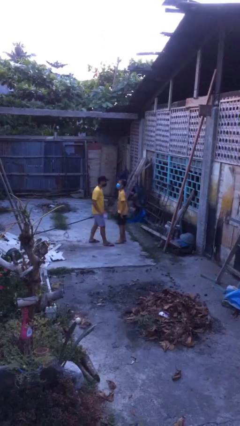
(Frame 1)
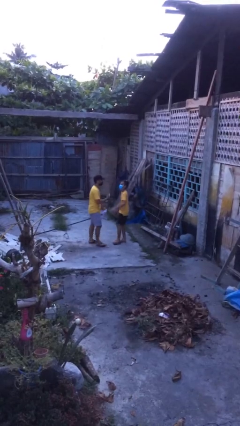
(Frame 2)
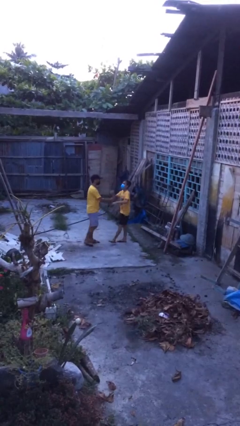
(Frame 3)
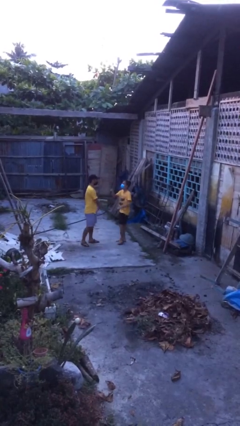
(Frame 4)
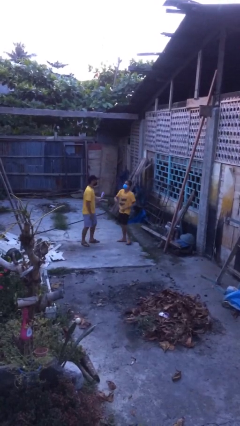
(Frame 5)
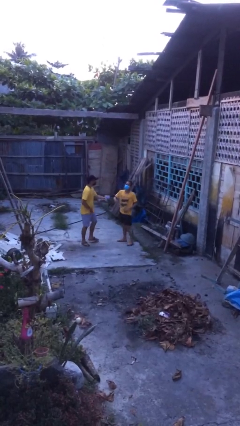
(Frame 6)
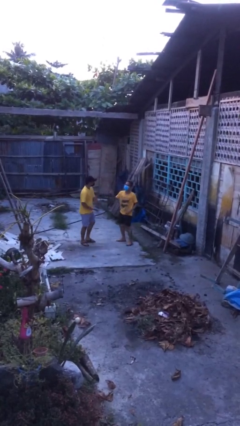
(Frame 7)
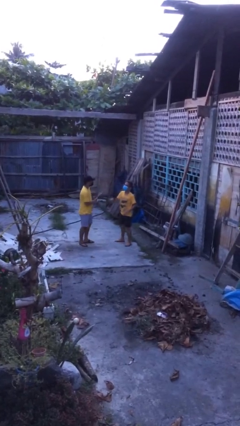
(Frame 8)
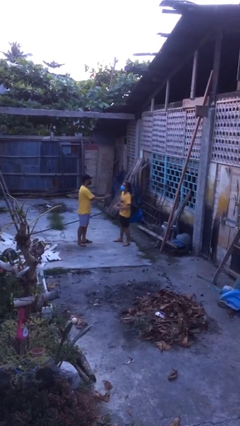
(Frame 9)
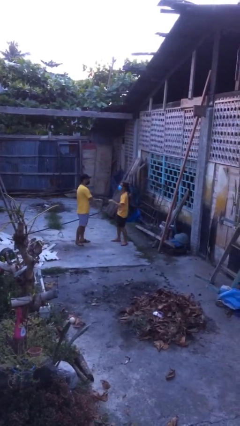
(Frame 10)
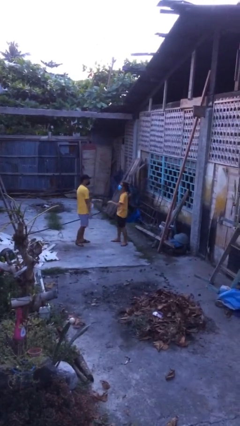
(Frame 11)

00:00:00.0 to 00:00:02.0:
person talks to person

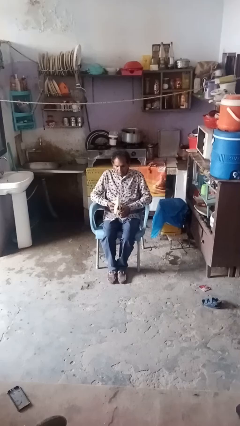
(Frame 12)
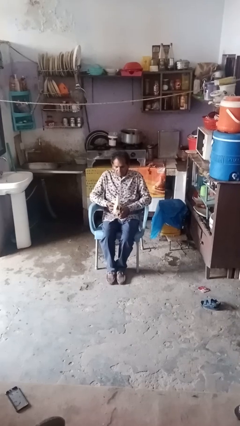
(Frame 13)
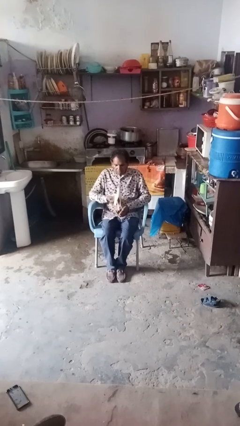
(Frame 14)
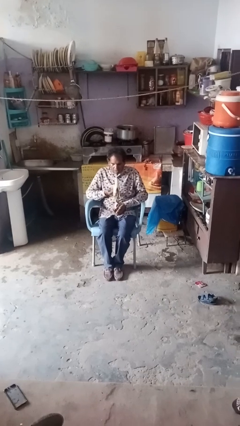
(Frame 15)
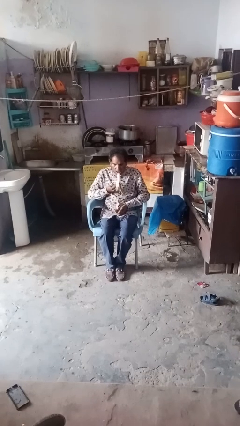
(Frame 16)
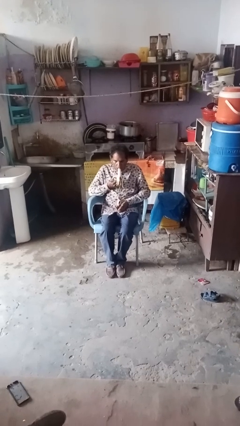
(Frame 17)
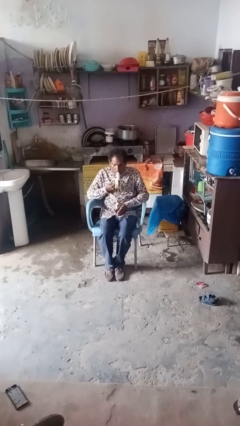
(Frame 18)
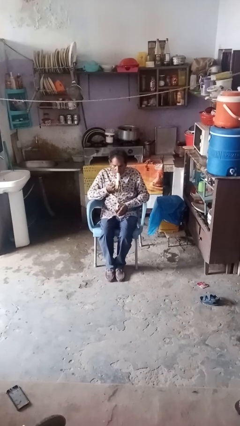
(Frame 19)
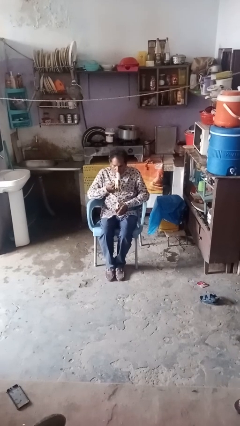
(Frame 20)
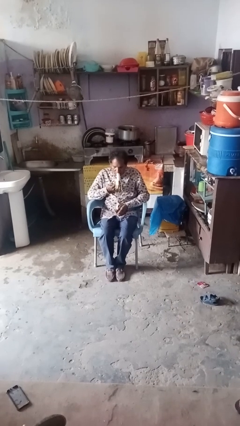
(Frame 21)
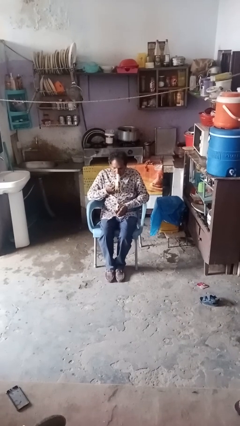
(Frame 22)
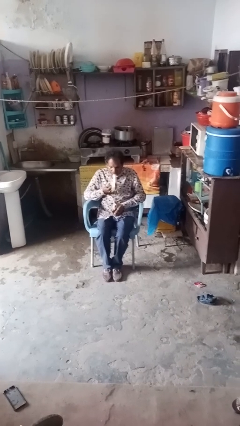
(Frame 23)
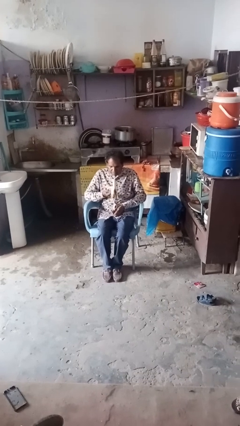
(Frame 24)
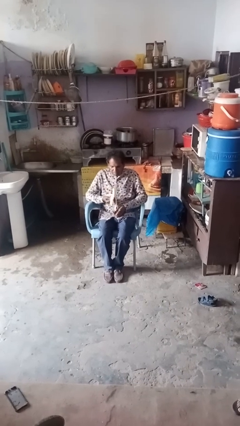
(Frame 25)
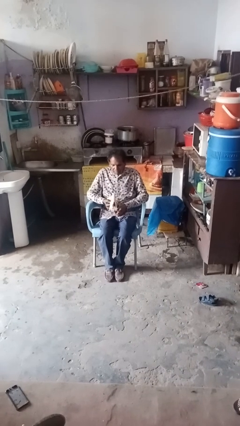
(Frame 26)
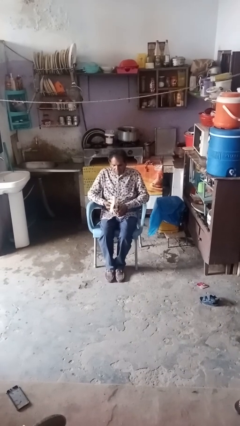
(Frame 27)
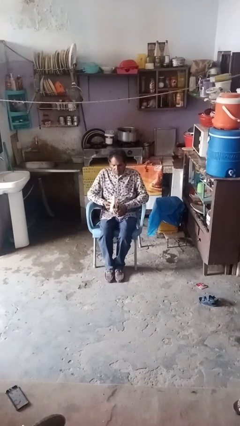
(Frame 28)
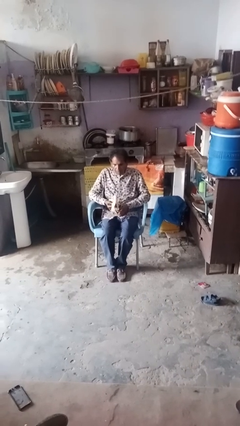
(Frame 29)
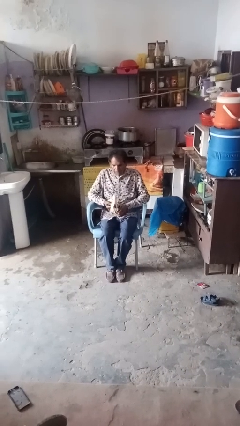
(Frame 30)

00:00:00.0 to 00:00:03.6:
person eats banana

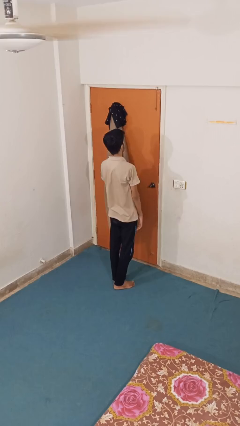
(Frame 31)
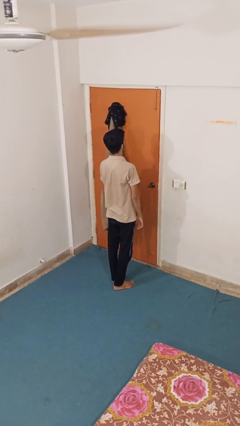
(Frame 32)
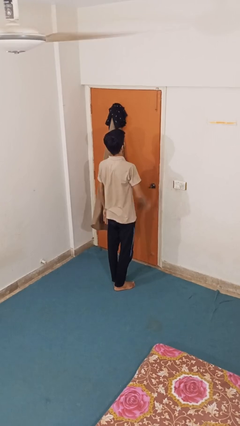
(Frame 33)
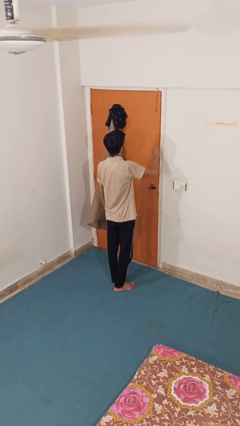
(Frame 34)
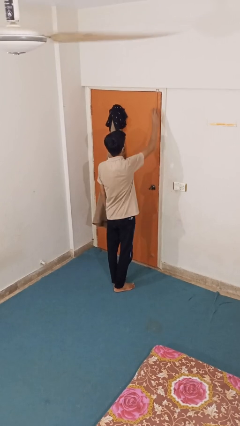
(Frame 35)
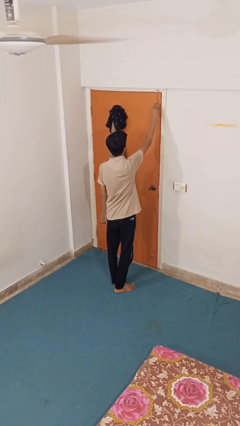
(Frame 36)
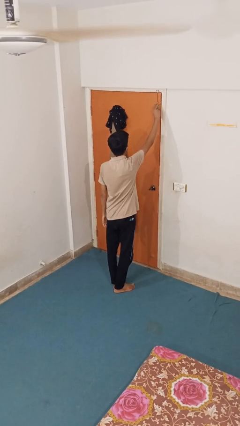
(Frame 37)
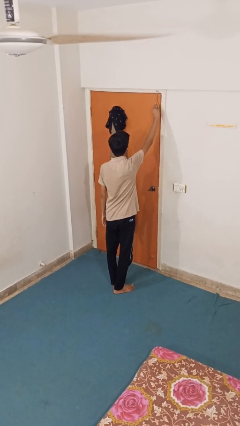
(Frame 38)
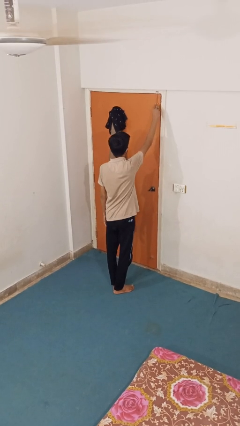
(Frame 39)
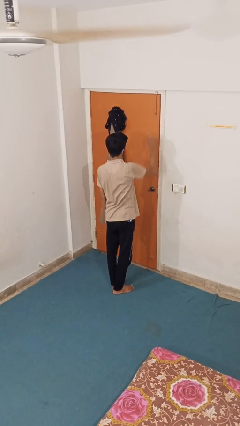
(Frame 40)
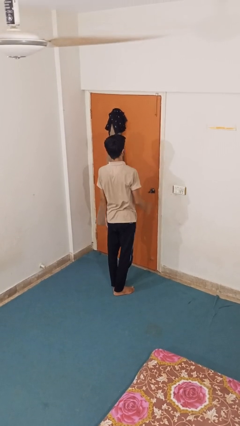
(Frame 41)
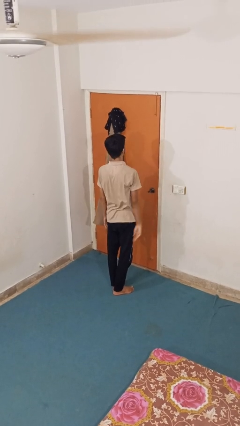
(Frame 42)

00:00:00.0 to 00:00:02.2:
person locks door with keys

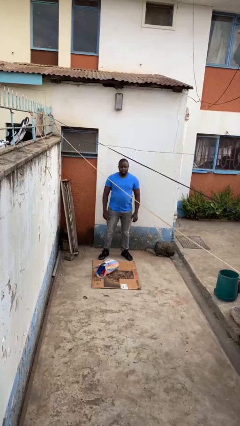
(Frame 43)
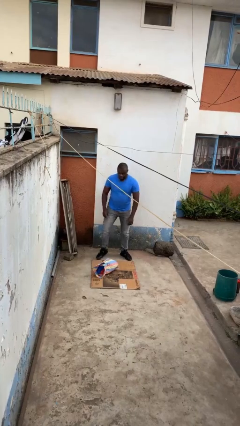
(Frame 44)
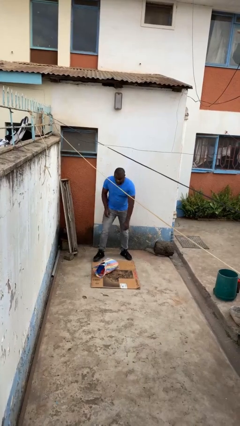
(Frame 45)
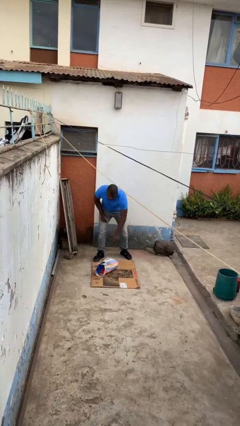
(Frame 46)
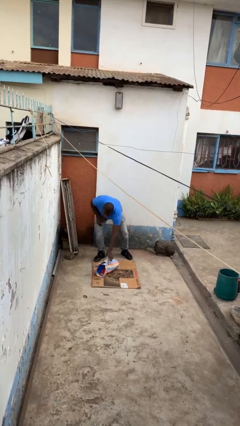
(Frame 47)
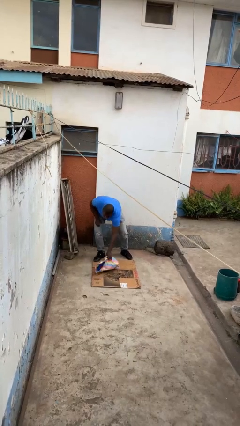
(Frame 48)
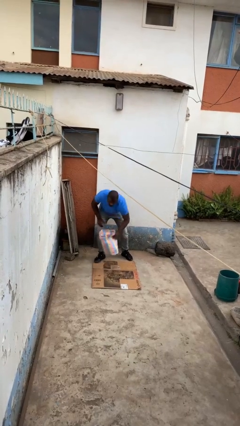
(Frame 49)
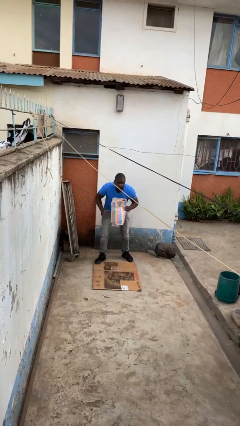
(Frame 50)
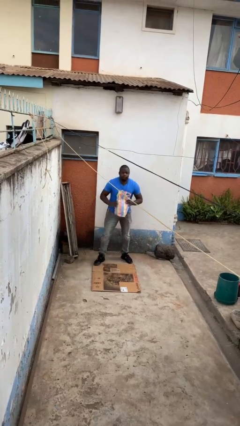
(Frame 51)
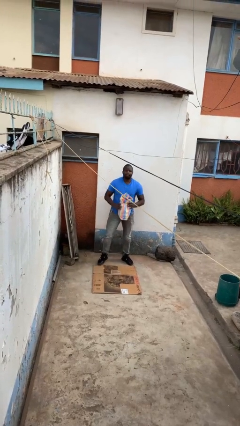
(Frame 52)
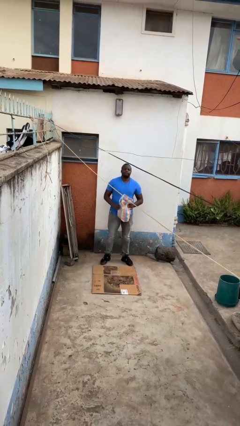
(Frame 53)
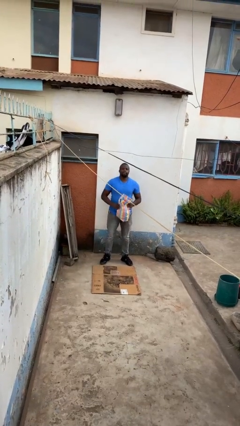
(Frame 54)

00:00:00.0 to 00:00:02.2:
person picks up object from floor

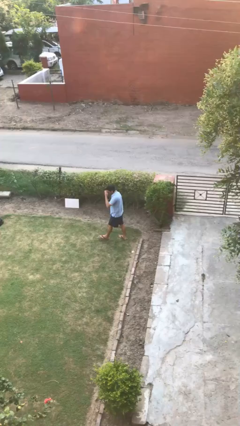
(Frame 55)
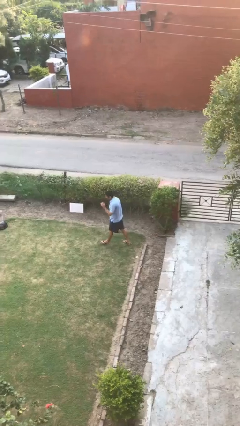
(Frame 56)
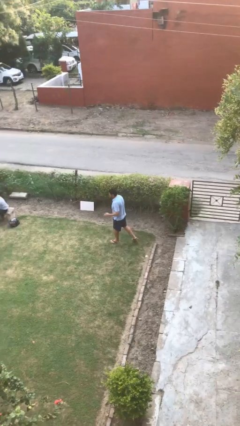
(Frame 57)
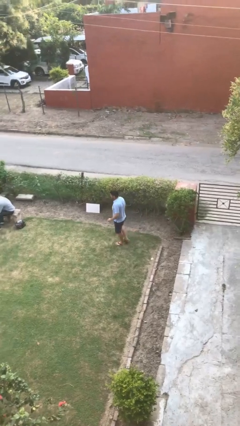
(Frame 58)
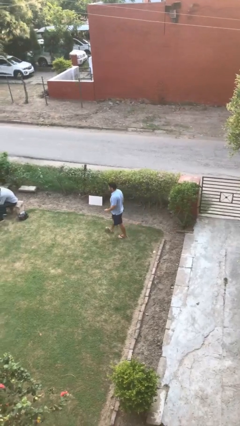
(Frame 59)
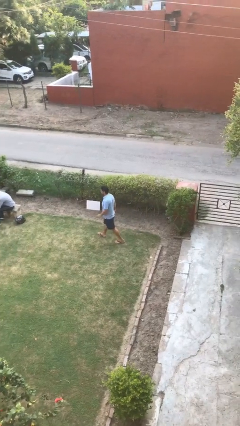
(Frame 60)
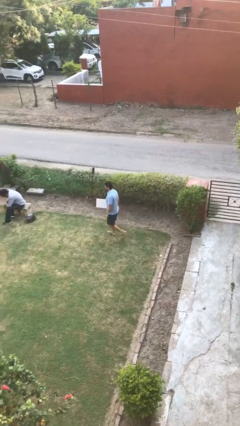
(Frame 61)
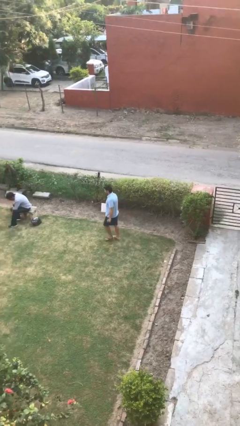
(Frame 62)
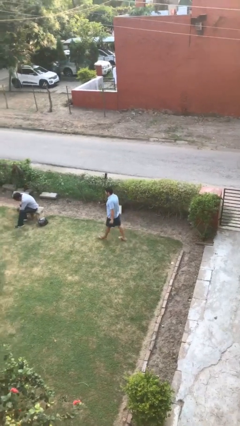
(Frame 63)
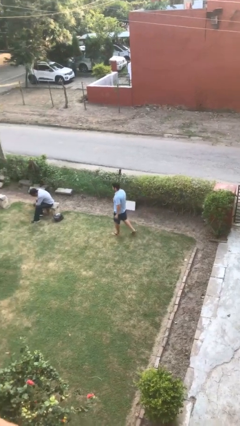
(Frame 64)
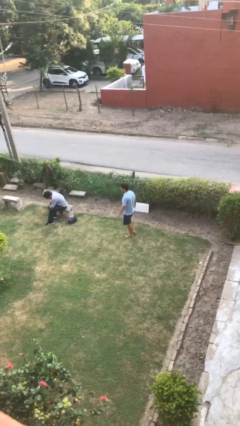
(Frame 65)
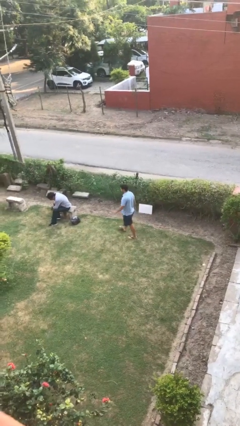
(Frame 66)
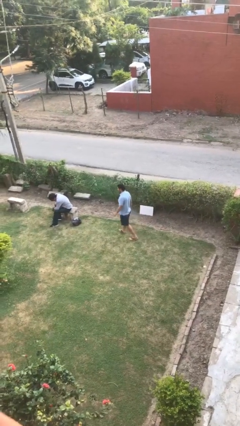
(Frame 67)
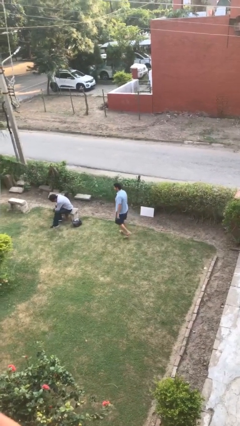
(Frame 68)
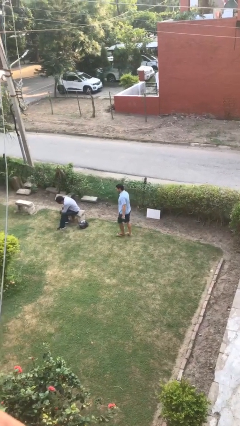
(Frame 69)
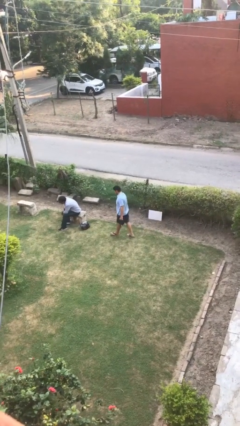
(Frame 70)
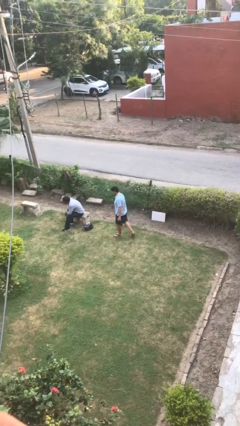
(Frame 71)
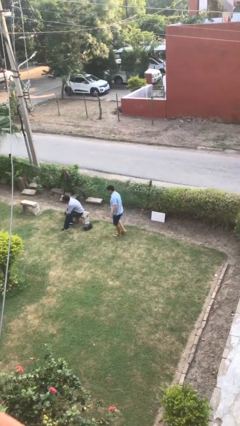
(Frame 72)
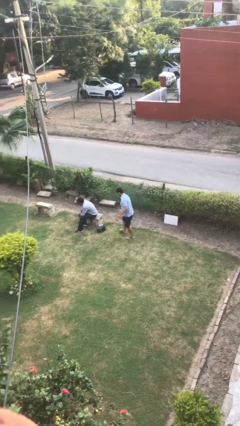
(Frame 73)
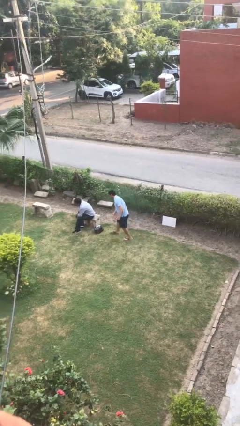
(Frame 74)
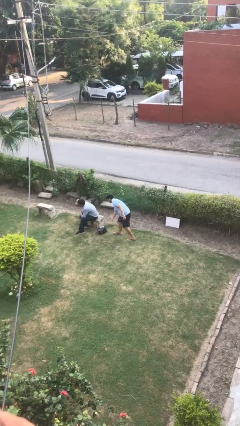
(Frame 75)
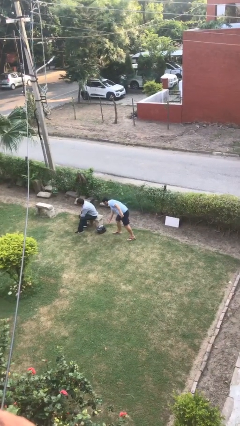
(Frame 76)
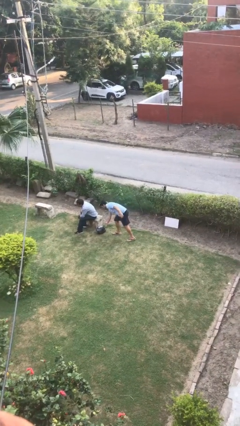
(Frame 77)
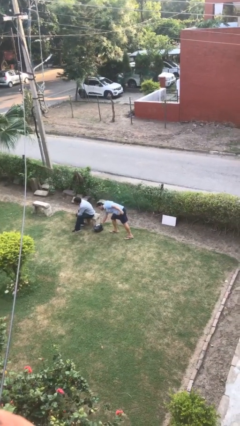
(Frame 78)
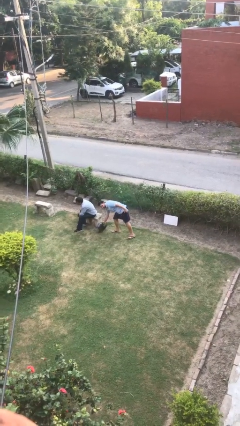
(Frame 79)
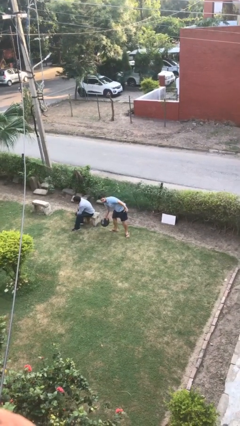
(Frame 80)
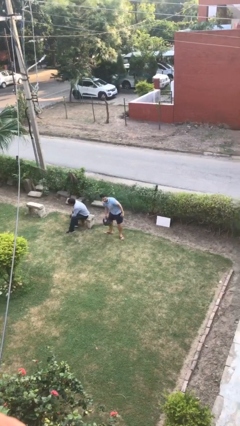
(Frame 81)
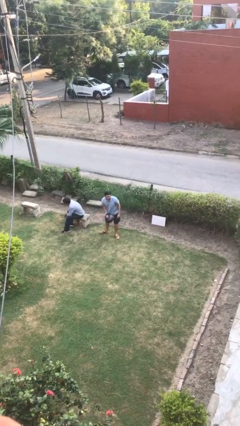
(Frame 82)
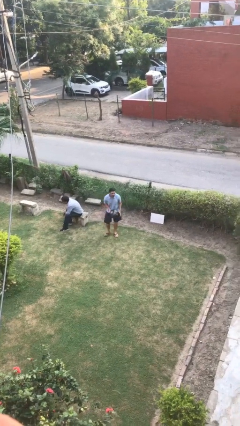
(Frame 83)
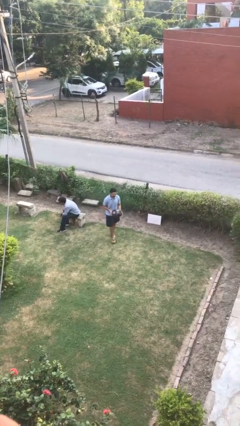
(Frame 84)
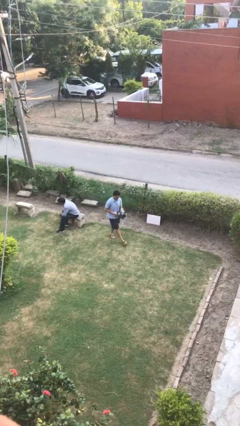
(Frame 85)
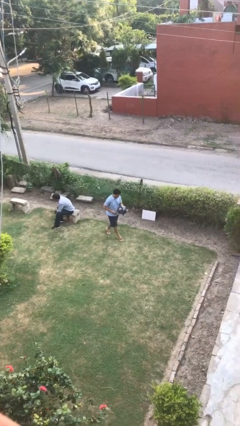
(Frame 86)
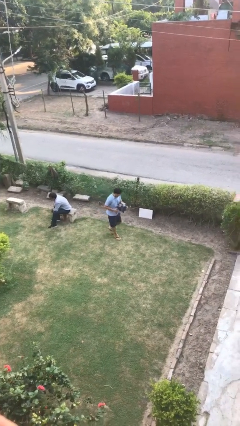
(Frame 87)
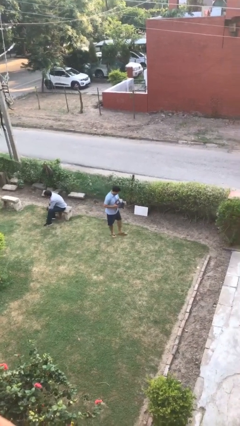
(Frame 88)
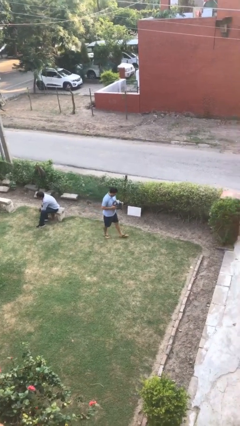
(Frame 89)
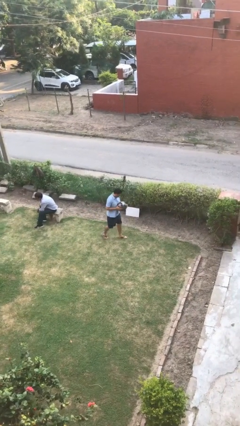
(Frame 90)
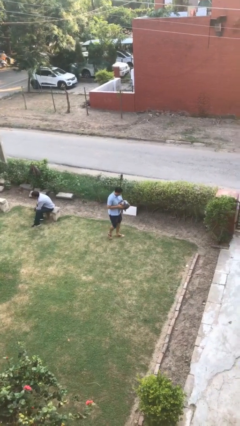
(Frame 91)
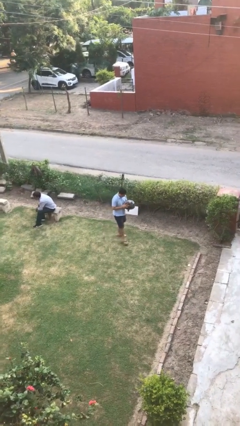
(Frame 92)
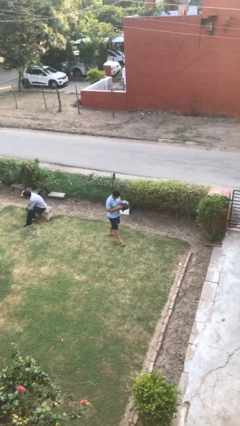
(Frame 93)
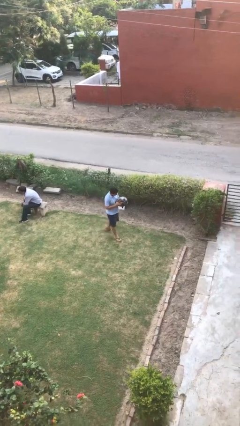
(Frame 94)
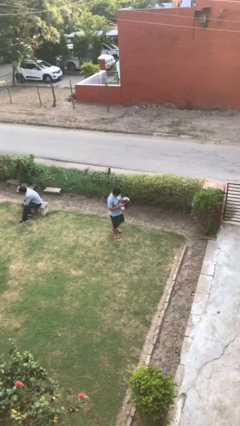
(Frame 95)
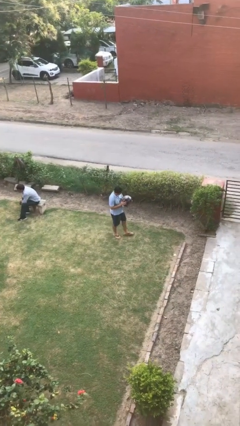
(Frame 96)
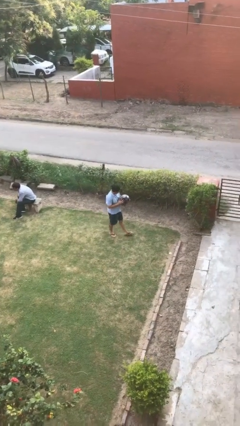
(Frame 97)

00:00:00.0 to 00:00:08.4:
person steals object from person
